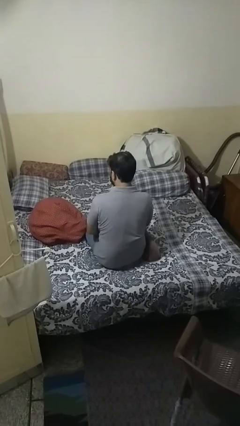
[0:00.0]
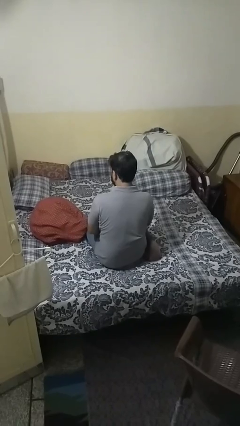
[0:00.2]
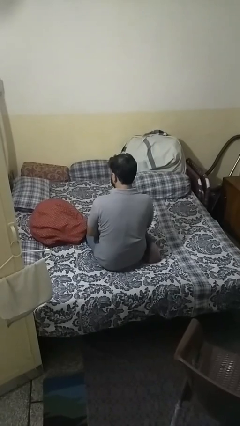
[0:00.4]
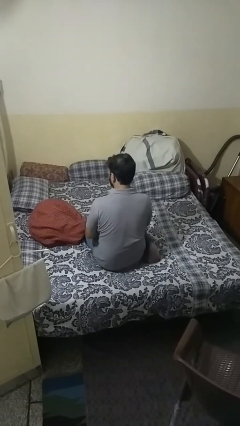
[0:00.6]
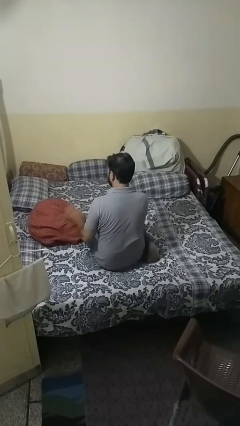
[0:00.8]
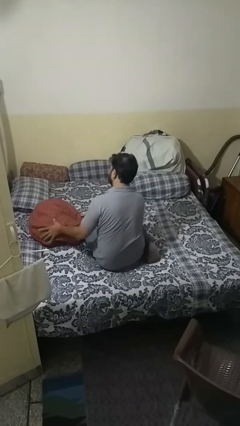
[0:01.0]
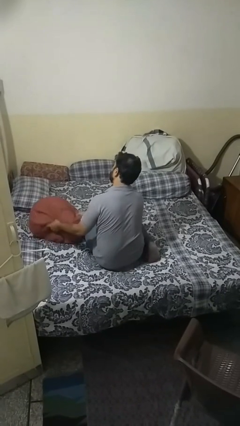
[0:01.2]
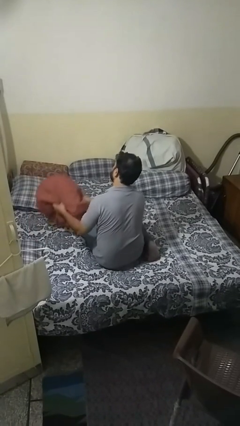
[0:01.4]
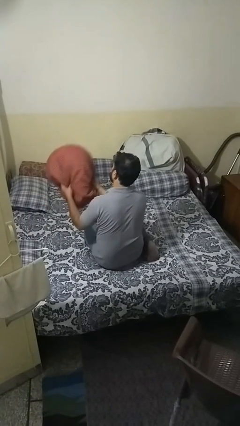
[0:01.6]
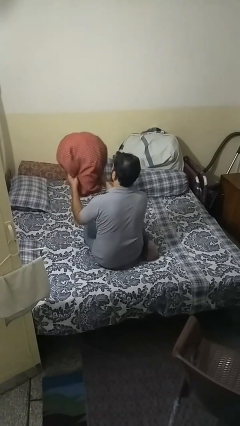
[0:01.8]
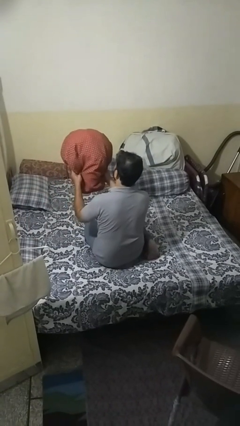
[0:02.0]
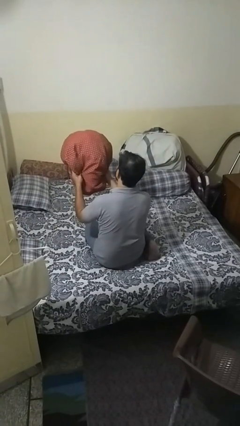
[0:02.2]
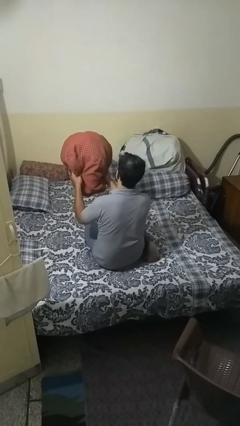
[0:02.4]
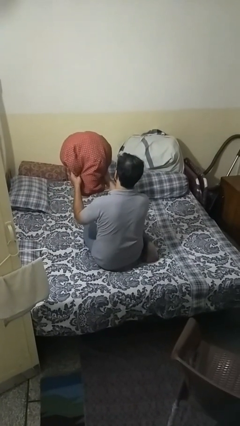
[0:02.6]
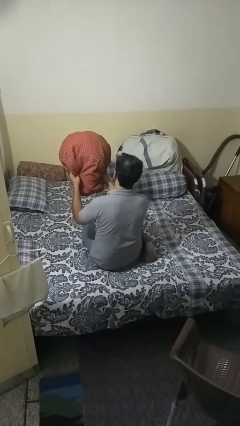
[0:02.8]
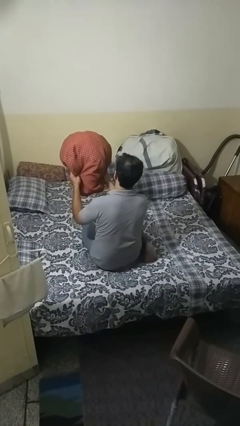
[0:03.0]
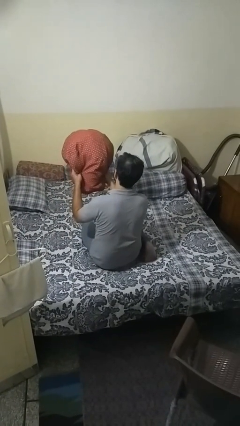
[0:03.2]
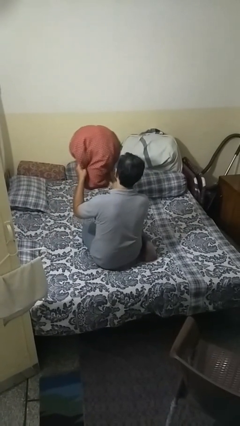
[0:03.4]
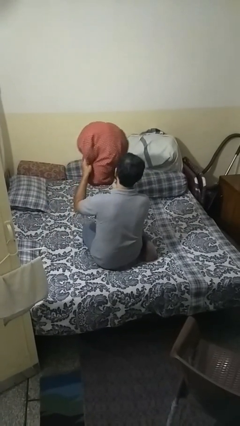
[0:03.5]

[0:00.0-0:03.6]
person picks up object from bed

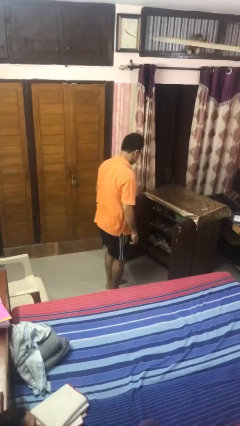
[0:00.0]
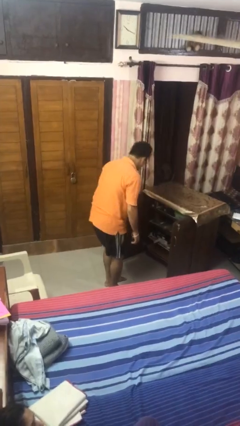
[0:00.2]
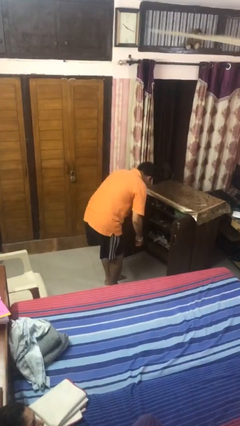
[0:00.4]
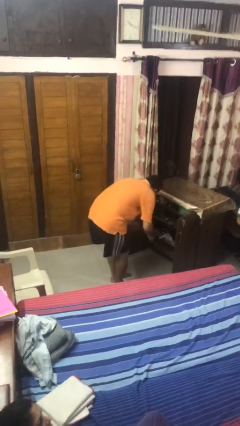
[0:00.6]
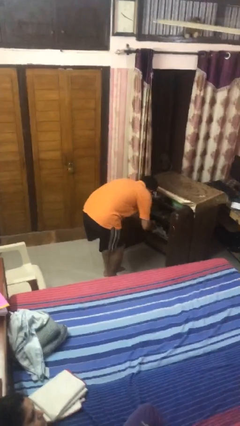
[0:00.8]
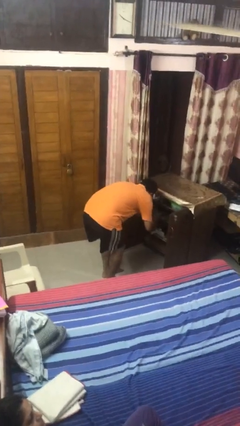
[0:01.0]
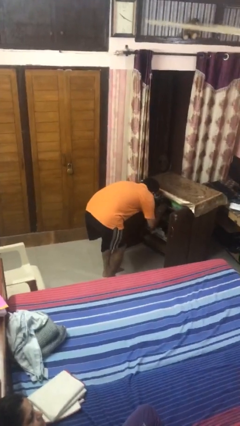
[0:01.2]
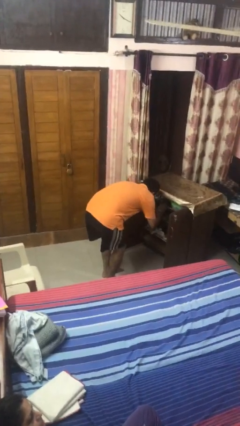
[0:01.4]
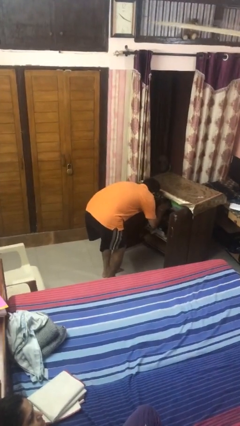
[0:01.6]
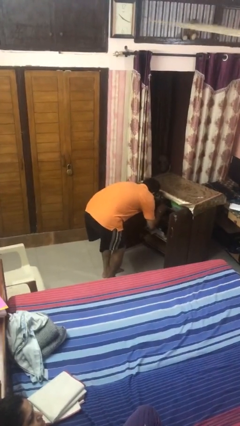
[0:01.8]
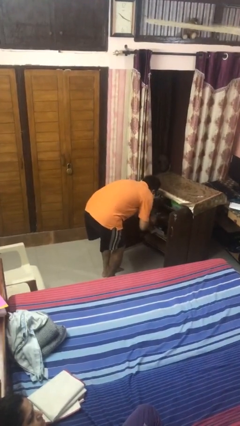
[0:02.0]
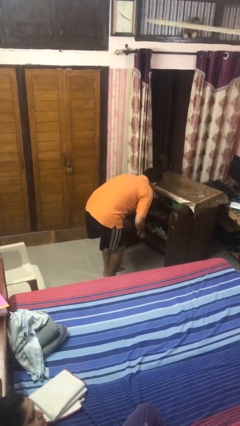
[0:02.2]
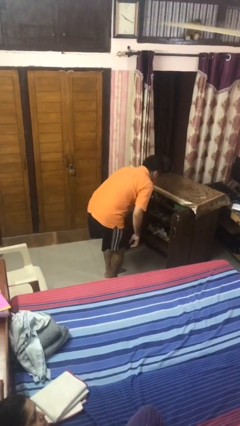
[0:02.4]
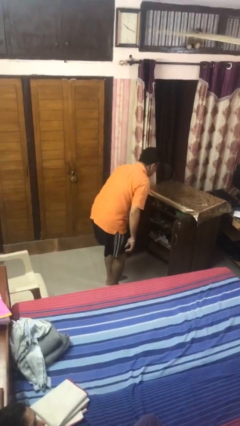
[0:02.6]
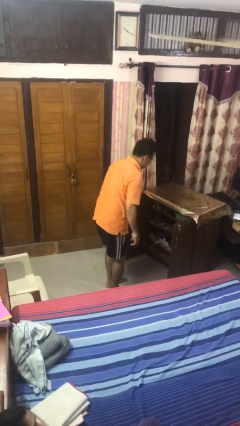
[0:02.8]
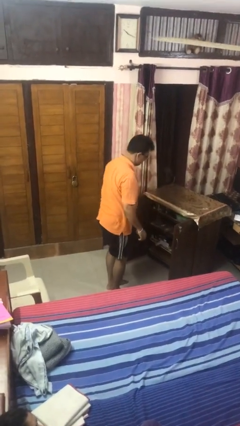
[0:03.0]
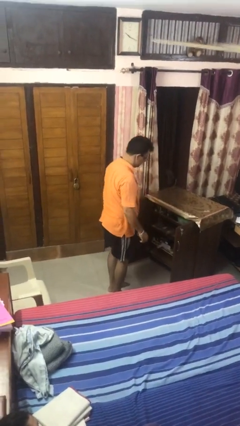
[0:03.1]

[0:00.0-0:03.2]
person searches in cabinet

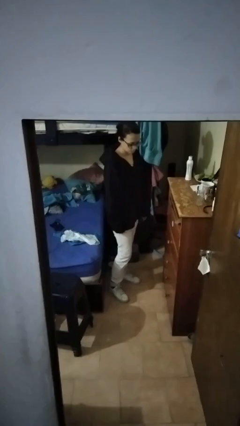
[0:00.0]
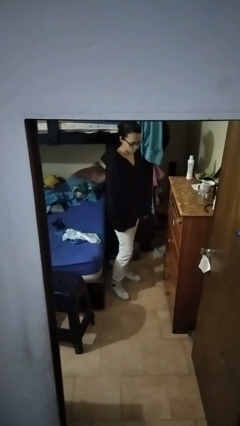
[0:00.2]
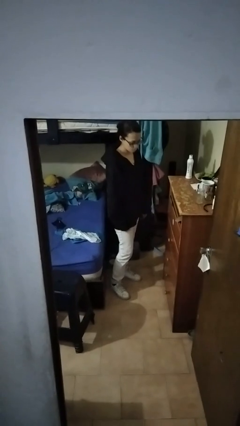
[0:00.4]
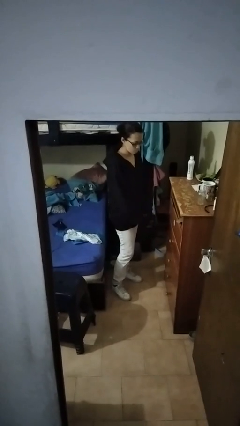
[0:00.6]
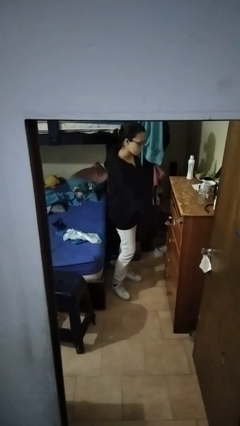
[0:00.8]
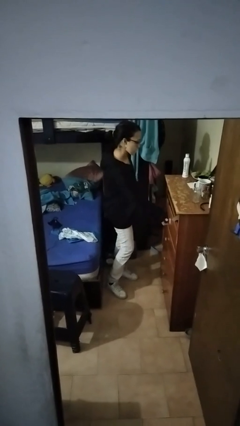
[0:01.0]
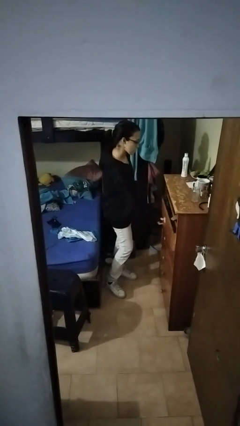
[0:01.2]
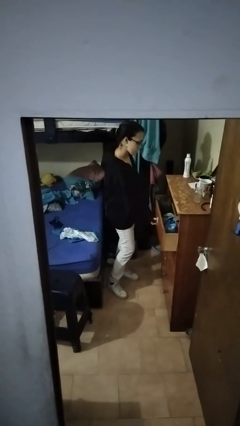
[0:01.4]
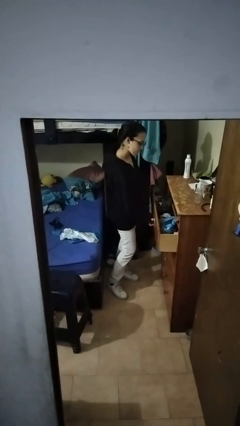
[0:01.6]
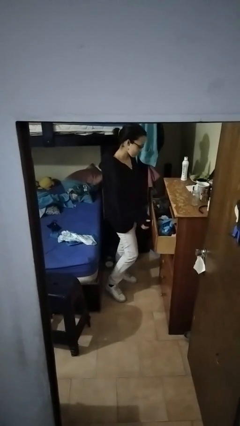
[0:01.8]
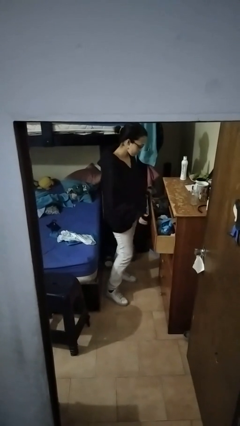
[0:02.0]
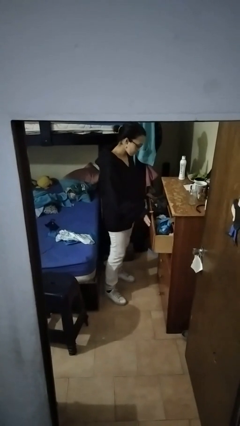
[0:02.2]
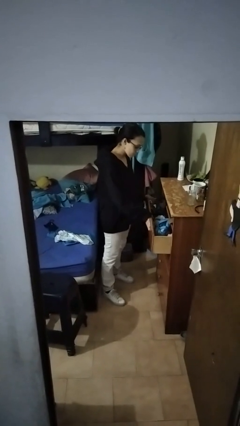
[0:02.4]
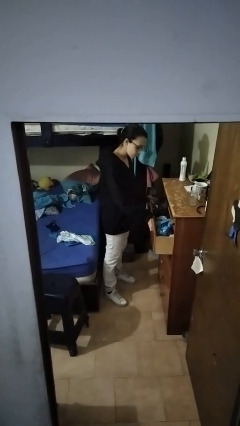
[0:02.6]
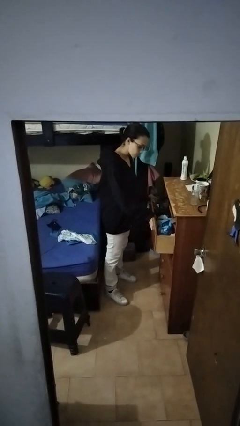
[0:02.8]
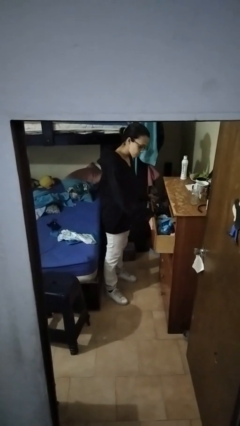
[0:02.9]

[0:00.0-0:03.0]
person opens dresser drawer

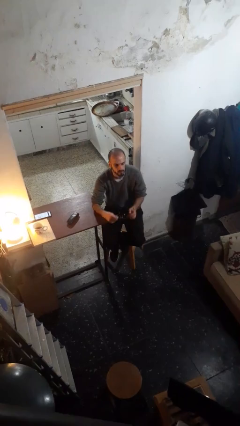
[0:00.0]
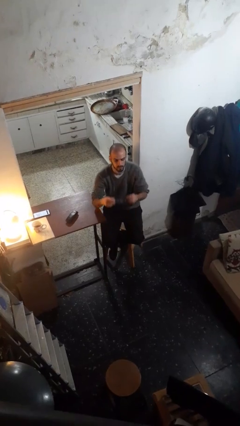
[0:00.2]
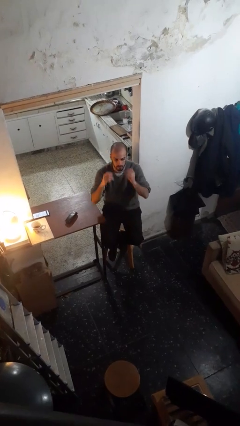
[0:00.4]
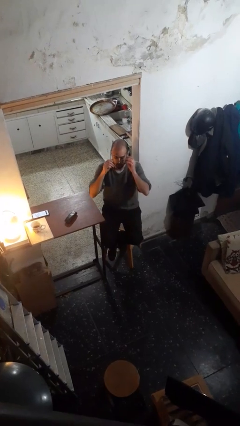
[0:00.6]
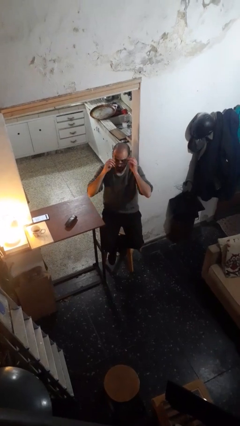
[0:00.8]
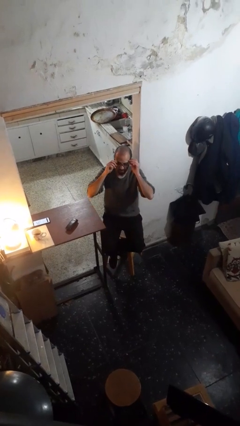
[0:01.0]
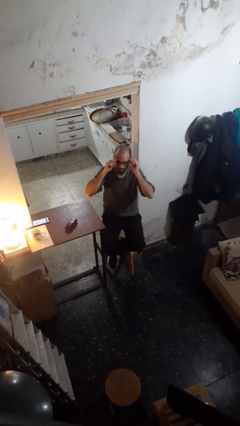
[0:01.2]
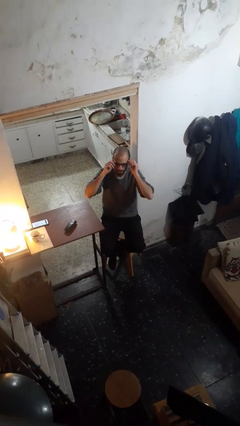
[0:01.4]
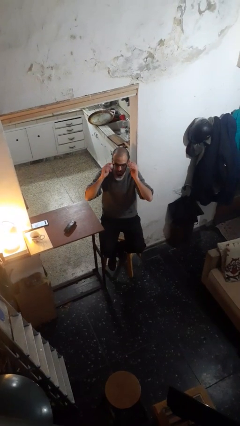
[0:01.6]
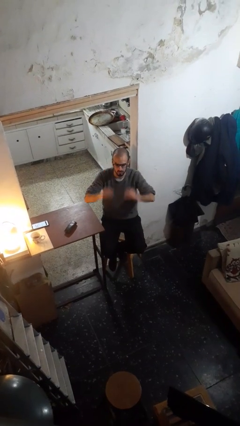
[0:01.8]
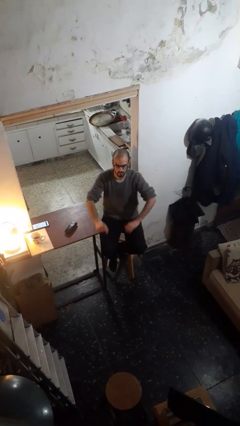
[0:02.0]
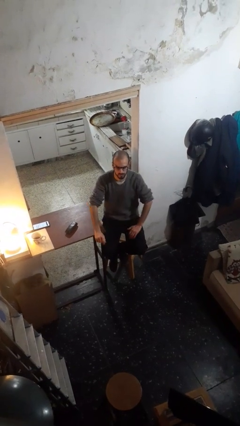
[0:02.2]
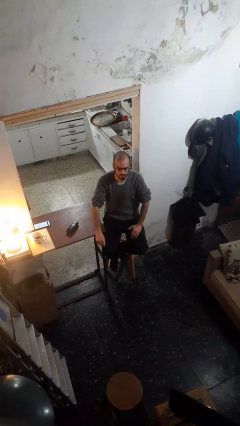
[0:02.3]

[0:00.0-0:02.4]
person puts on glasses

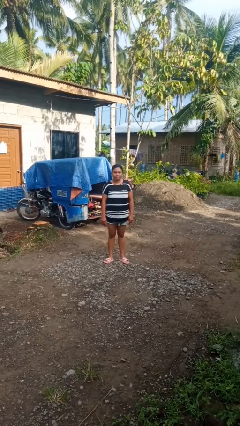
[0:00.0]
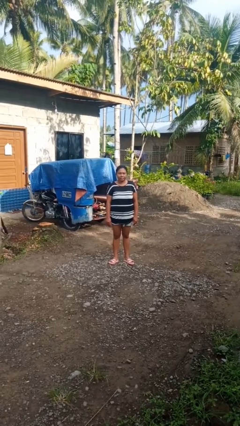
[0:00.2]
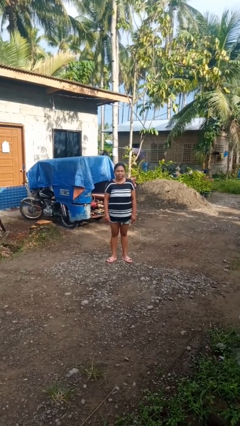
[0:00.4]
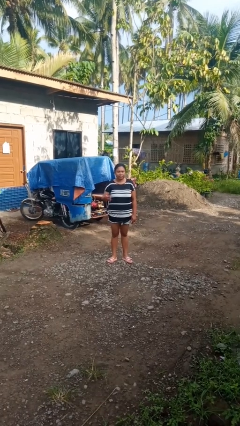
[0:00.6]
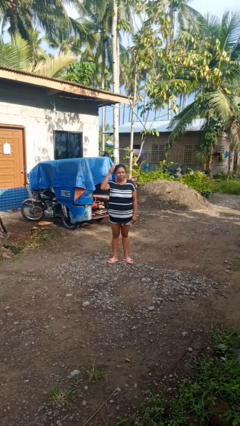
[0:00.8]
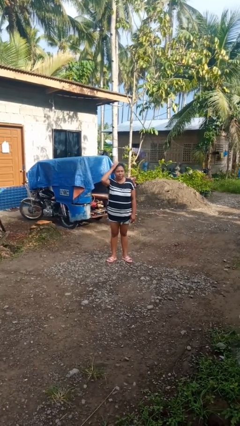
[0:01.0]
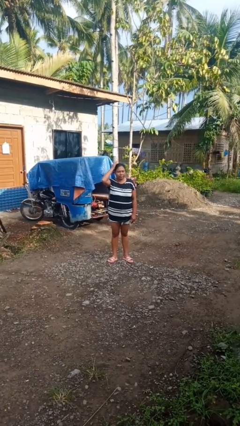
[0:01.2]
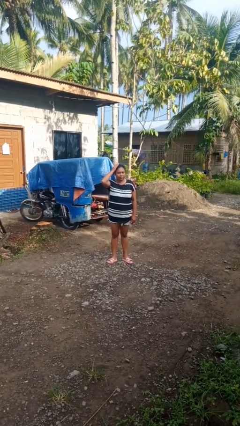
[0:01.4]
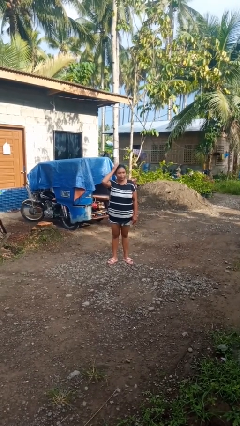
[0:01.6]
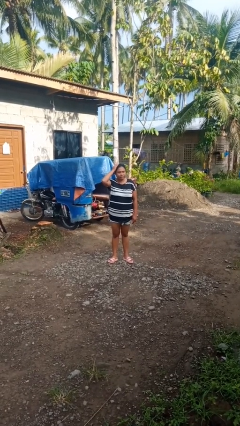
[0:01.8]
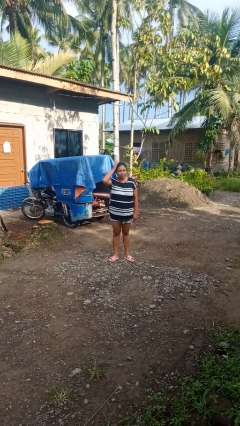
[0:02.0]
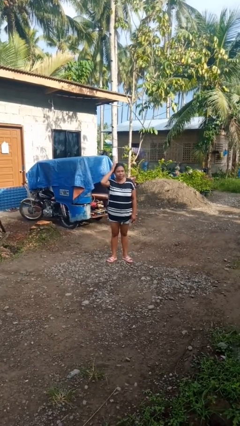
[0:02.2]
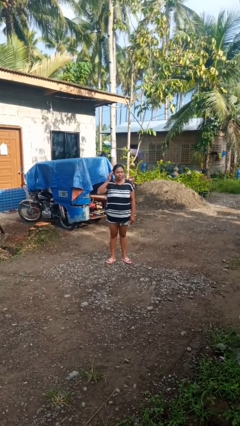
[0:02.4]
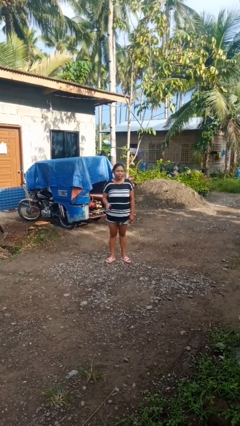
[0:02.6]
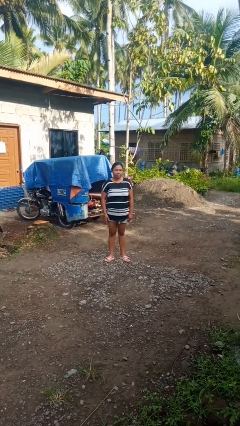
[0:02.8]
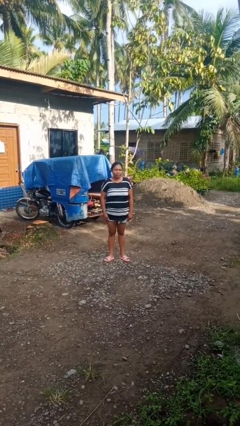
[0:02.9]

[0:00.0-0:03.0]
person pats head

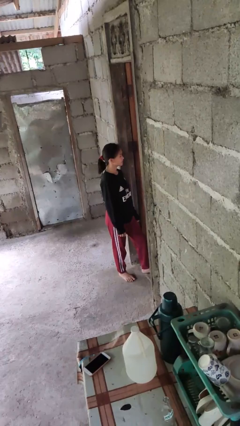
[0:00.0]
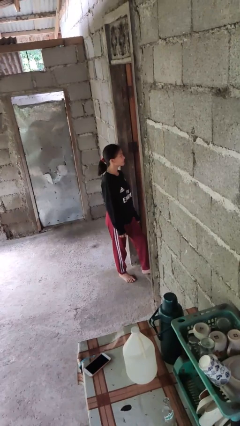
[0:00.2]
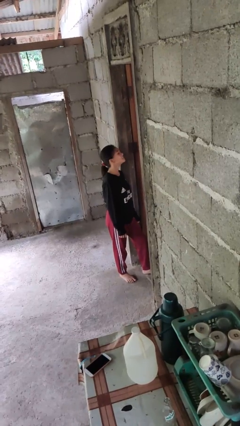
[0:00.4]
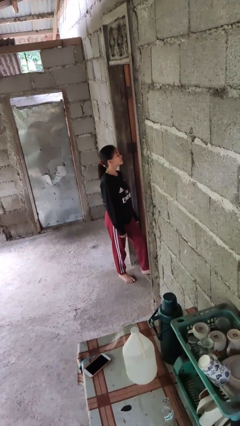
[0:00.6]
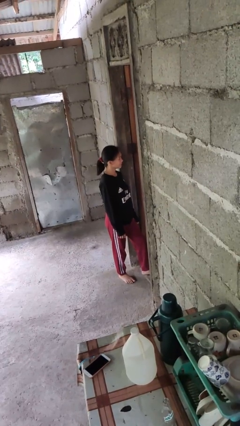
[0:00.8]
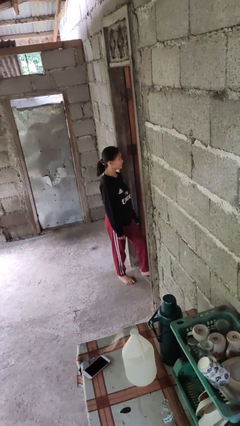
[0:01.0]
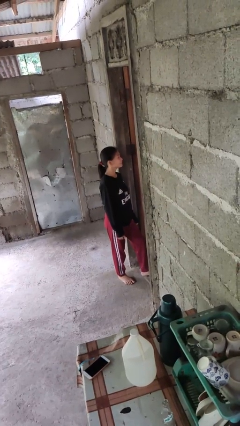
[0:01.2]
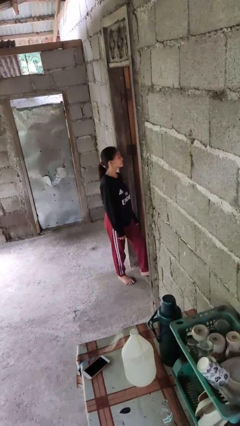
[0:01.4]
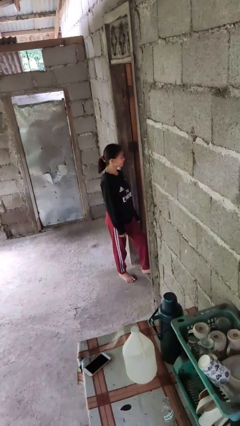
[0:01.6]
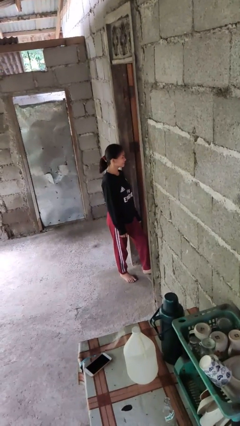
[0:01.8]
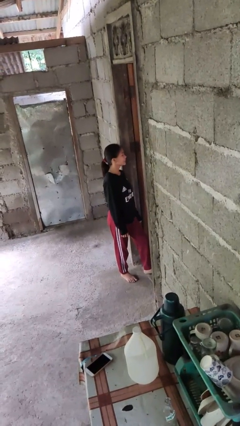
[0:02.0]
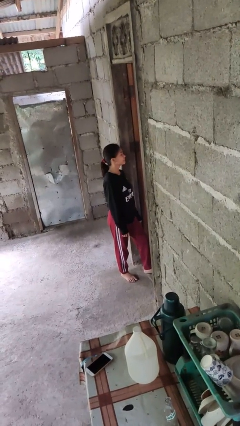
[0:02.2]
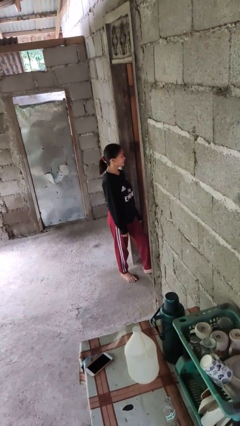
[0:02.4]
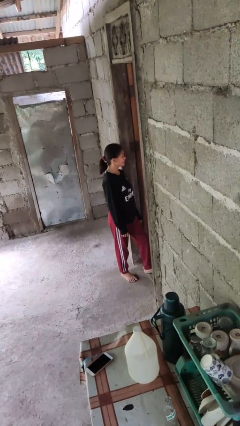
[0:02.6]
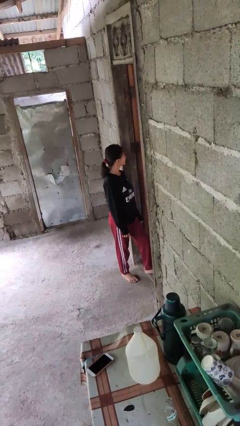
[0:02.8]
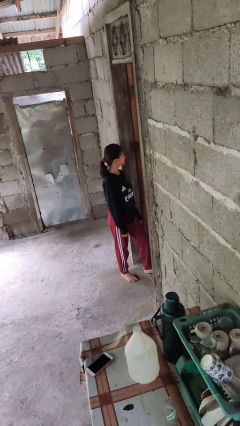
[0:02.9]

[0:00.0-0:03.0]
person nods head
